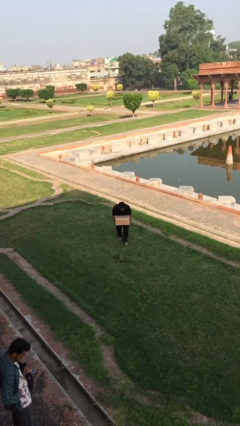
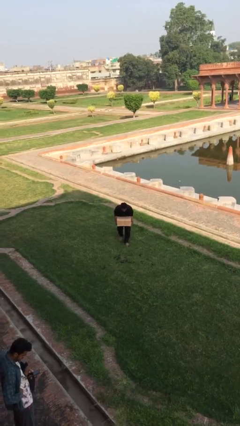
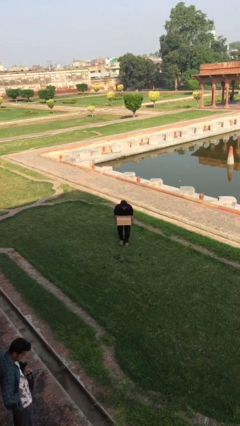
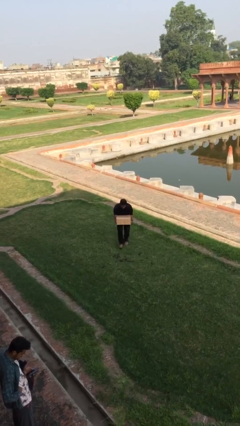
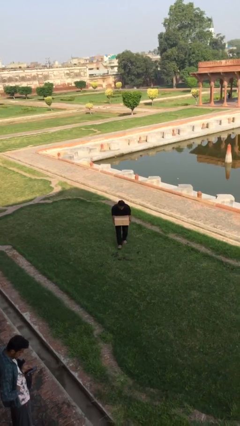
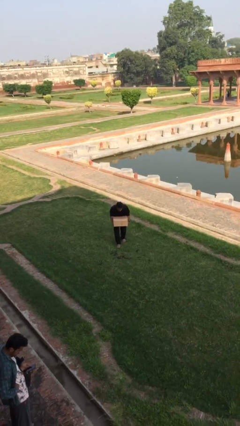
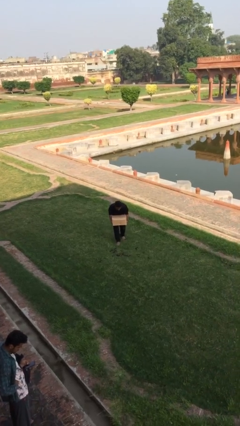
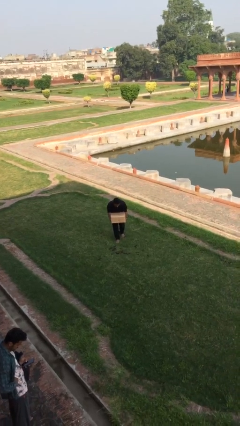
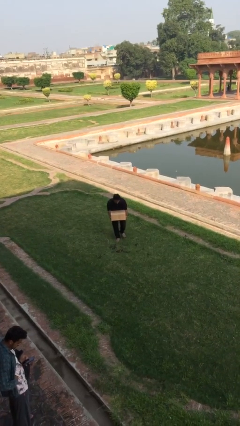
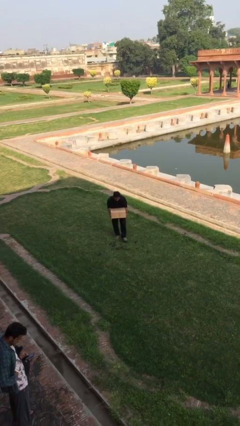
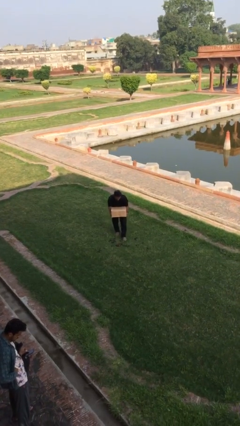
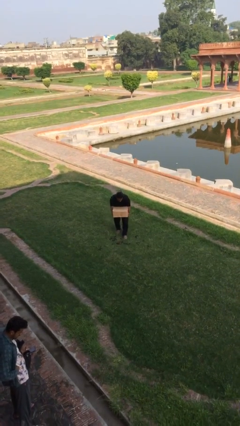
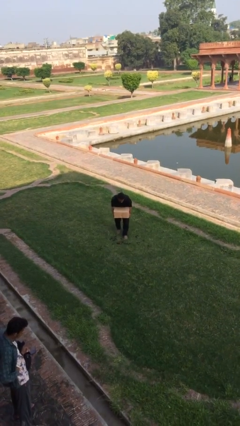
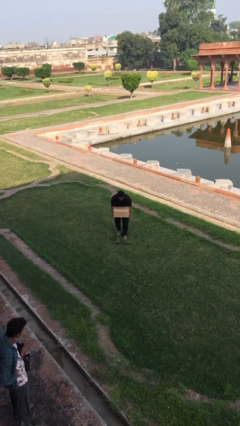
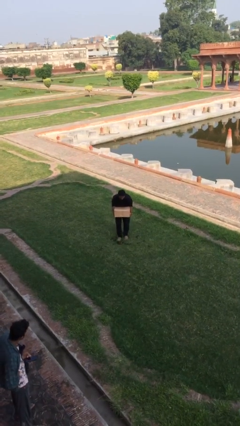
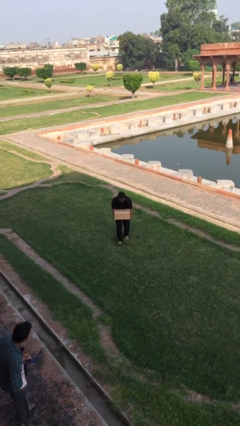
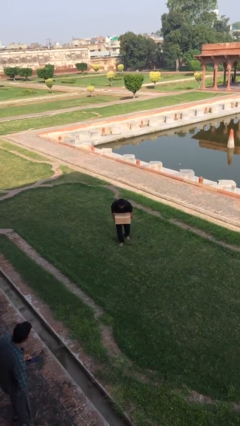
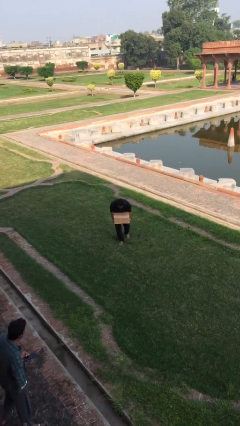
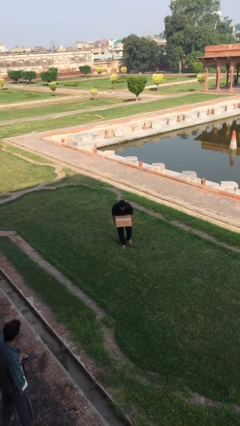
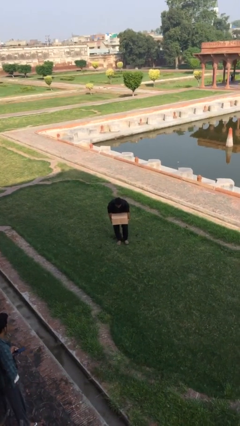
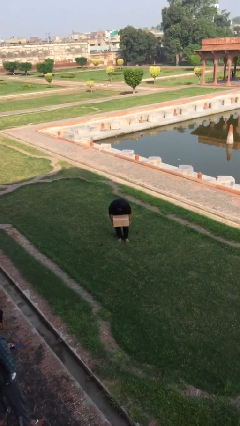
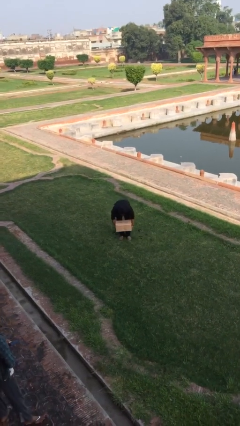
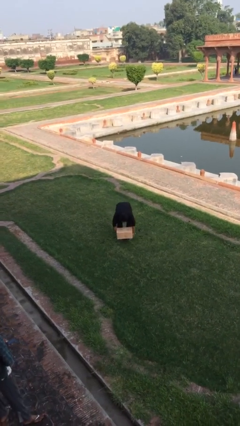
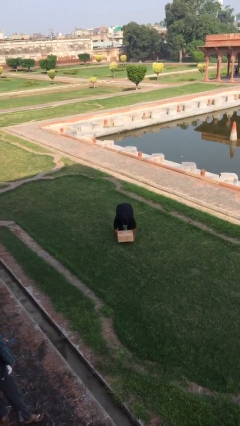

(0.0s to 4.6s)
person carries heavy object

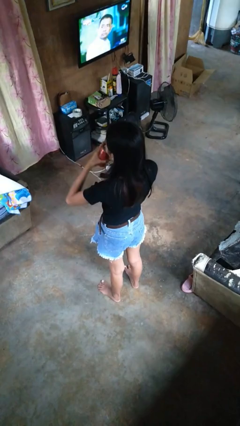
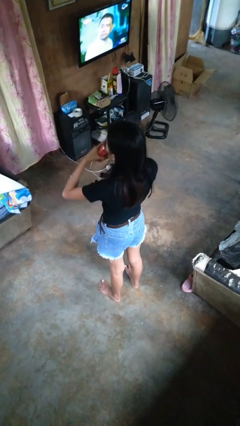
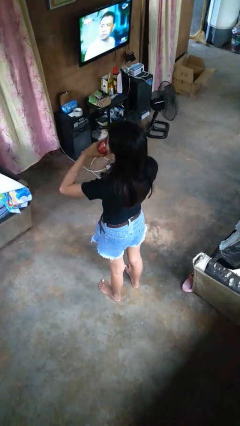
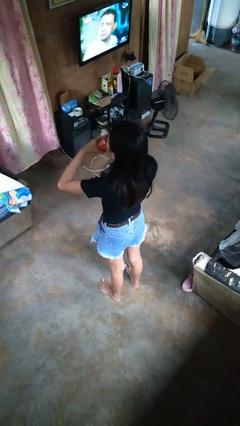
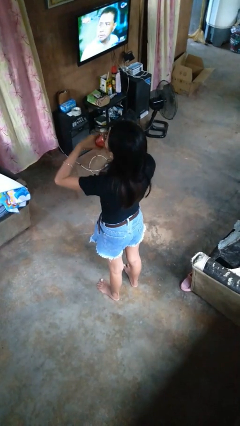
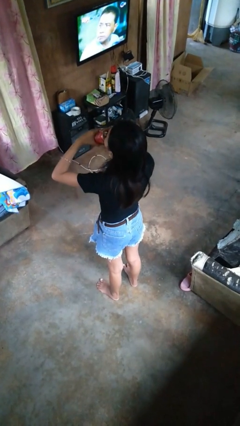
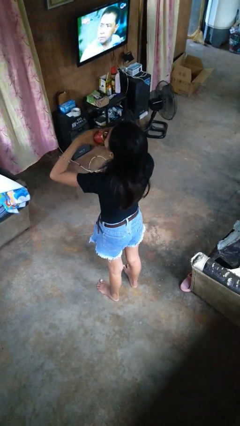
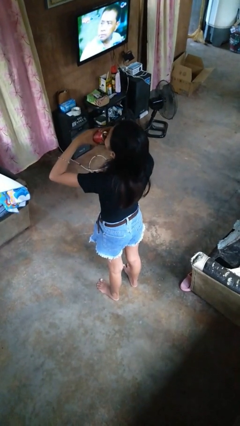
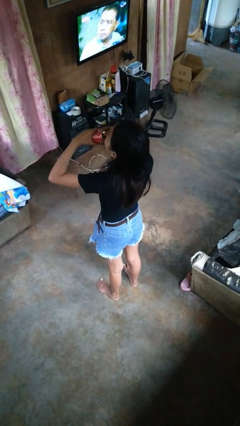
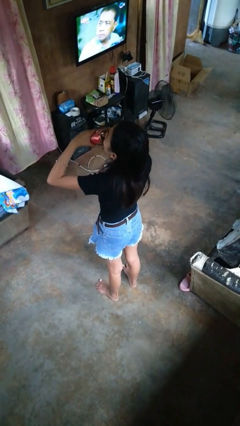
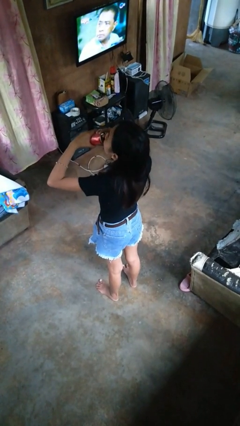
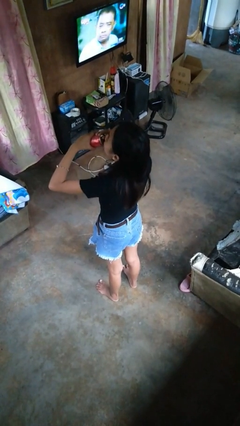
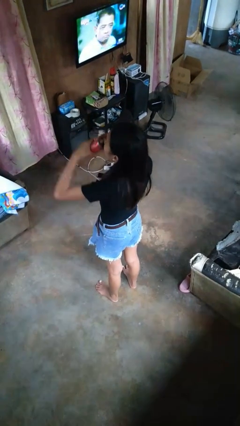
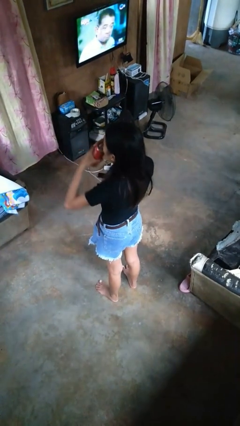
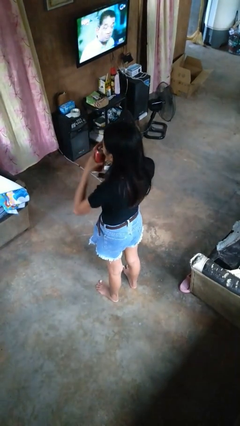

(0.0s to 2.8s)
person drinks from beverage can

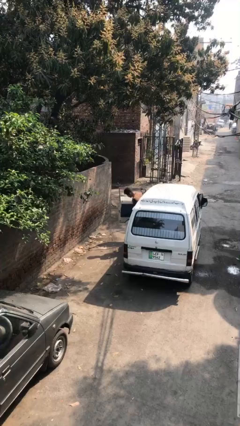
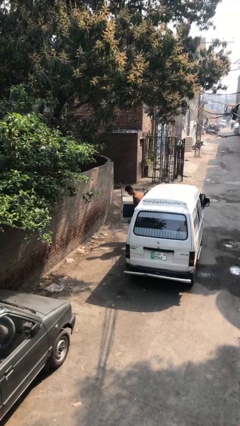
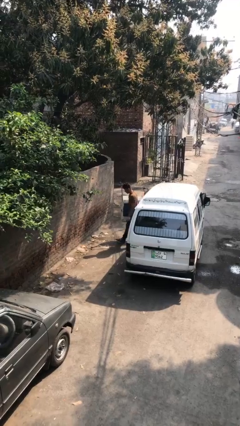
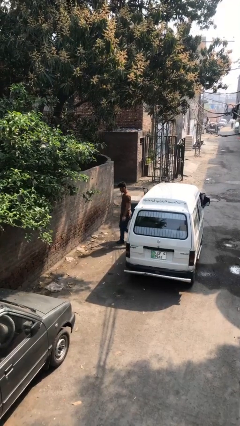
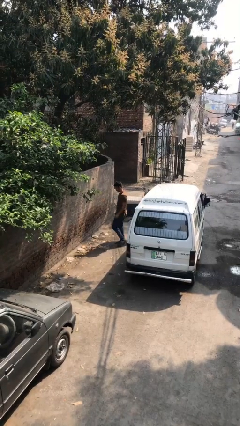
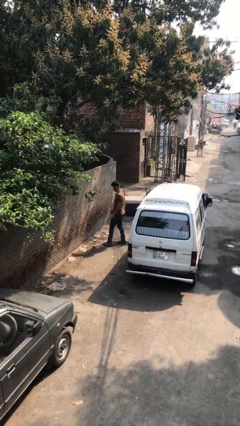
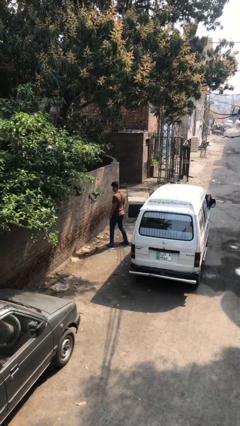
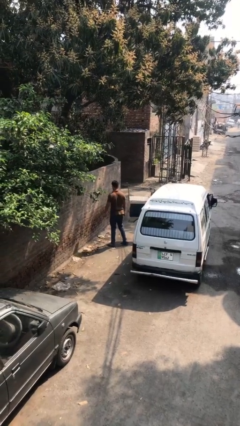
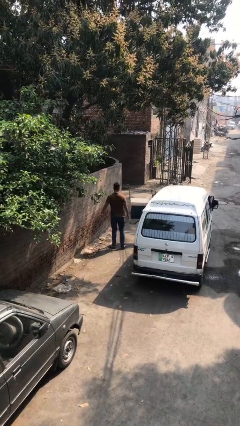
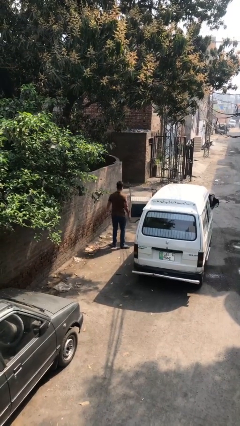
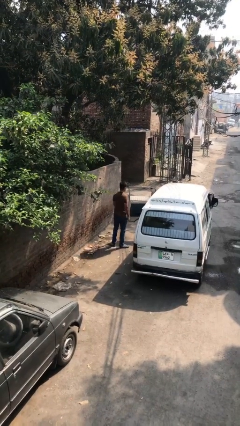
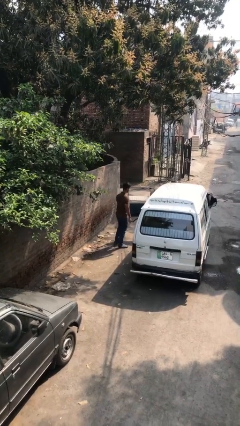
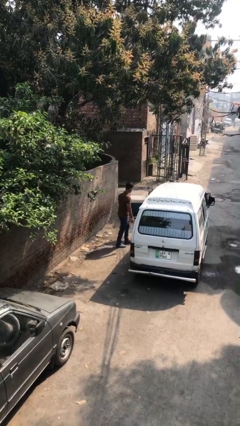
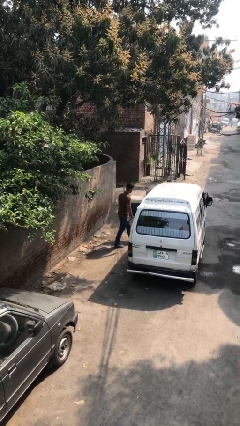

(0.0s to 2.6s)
person exits car

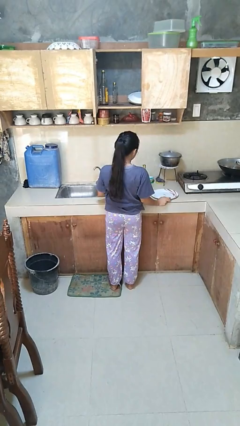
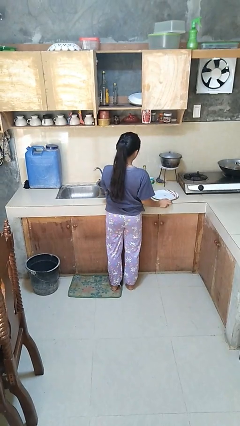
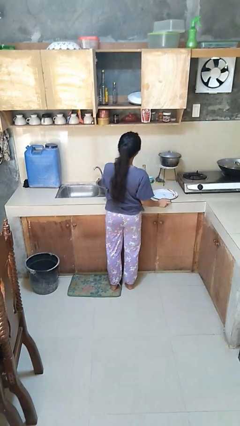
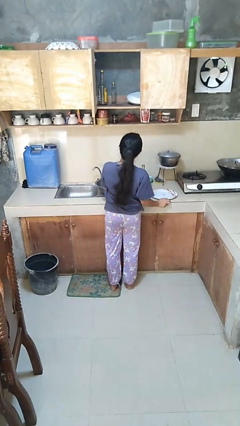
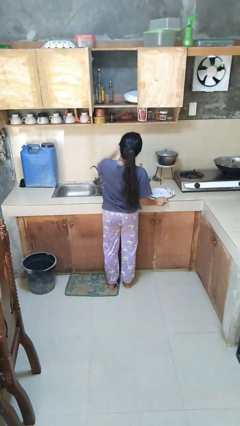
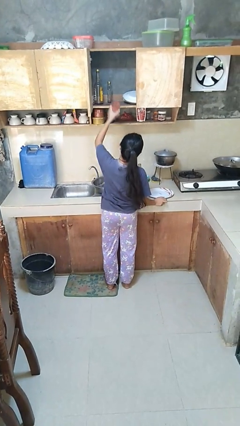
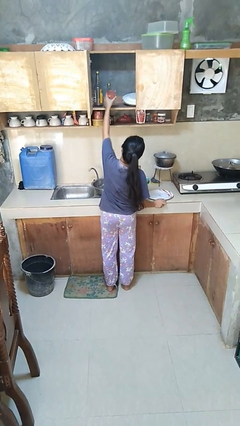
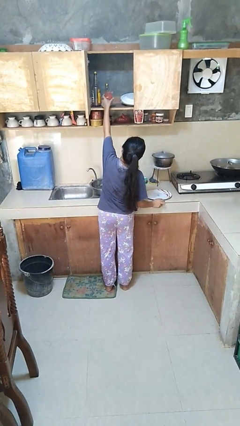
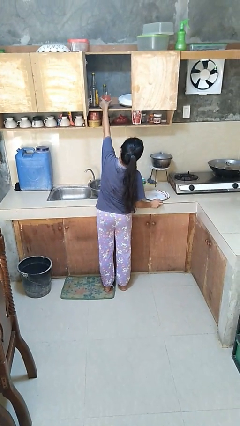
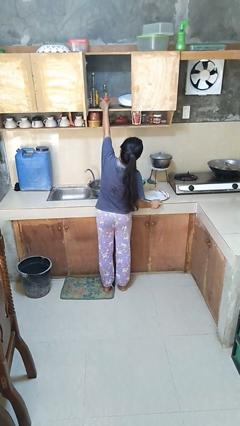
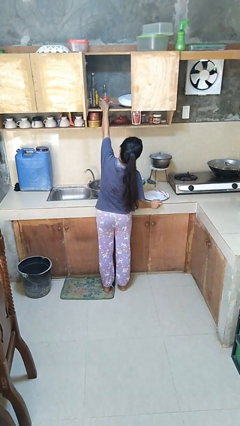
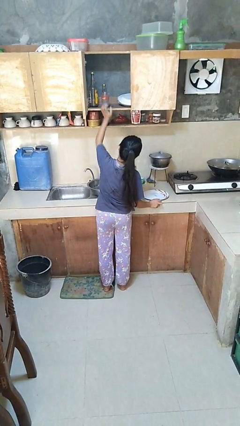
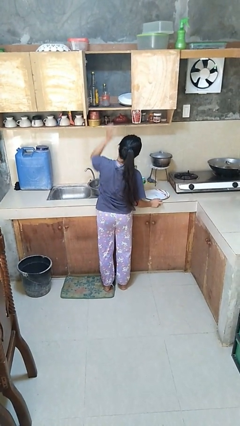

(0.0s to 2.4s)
person puts object in cabinet

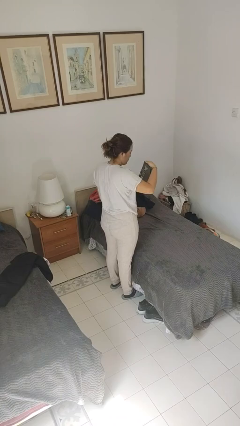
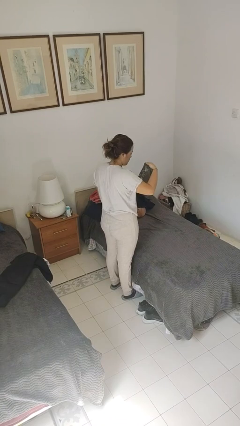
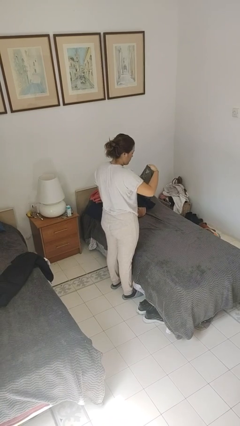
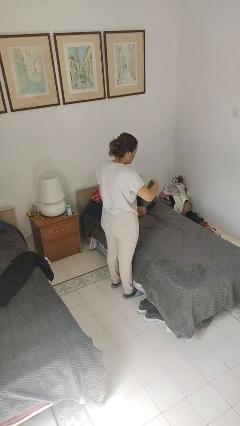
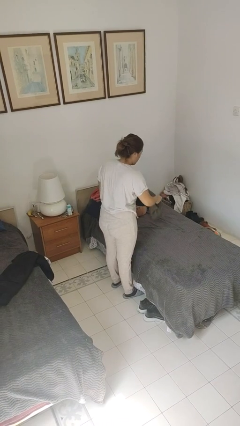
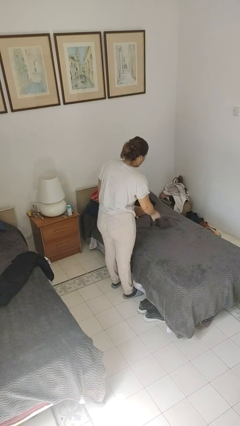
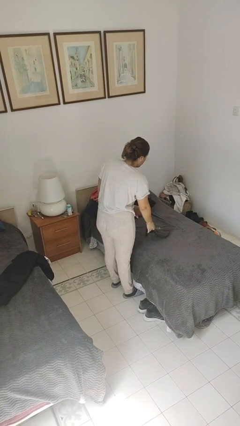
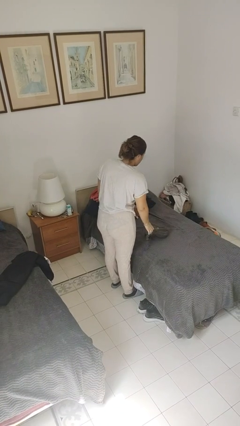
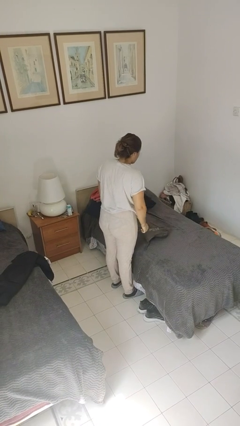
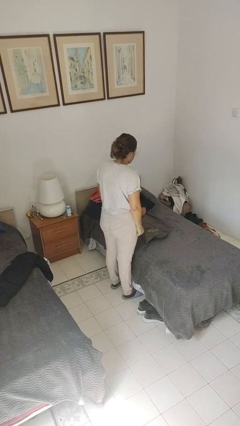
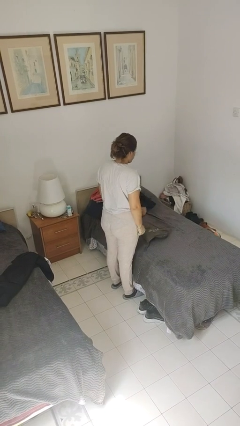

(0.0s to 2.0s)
person puts down object on bed

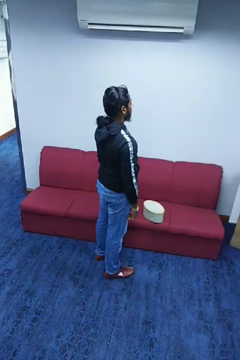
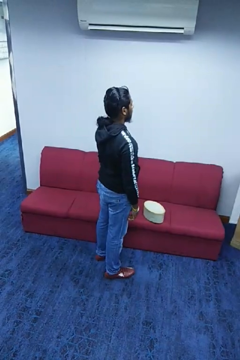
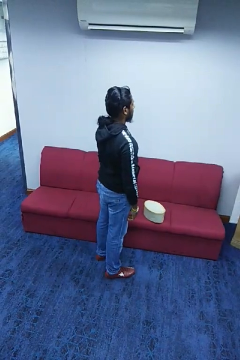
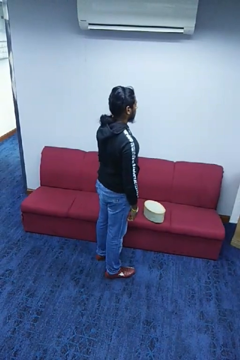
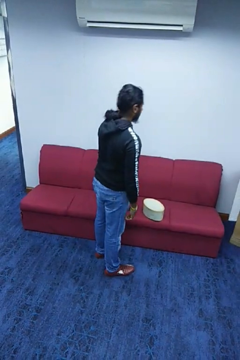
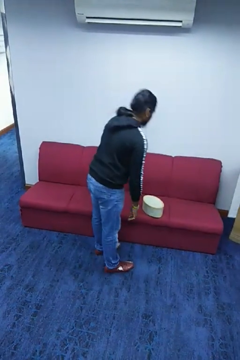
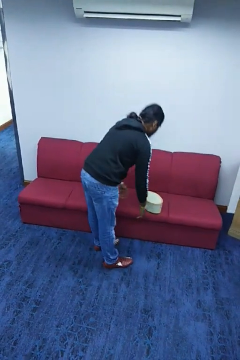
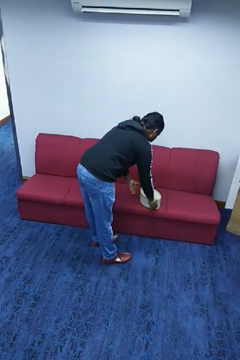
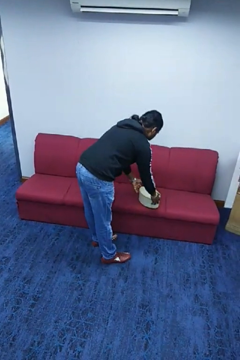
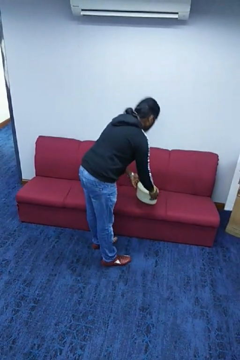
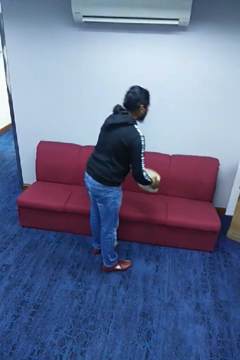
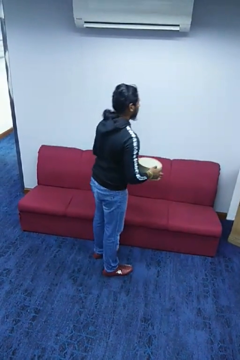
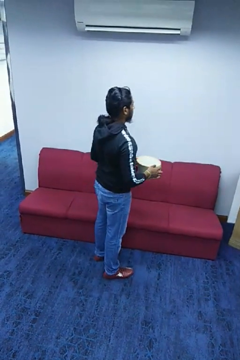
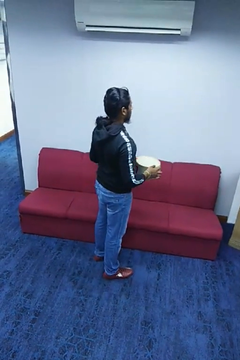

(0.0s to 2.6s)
person picks up object from couch

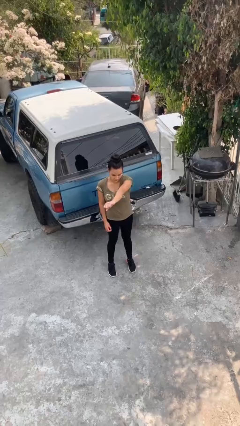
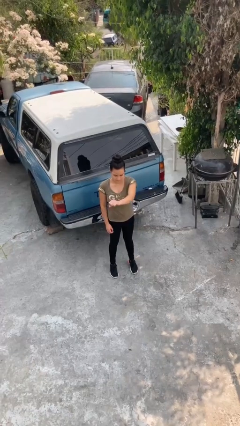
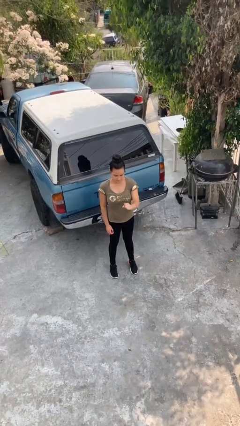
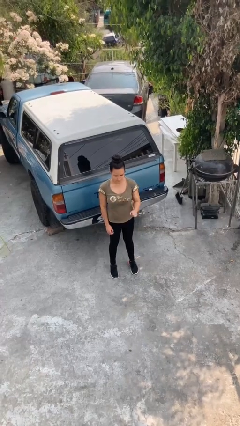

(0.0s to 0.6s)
person karate chop

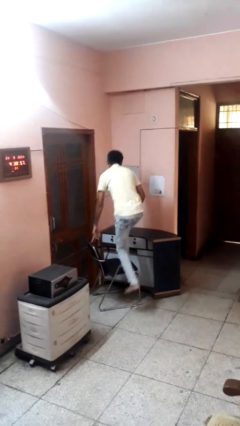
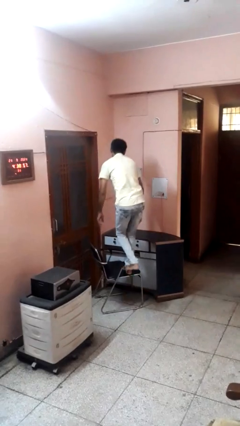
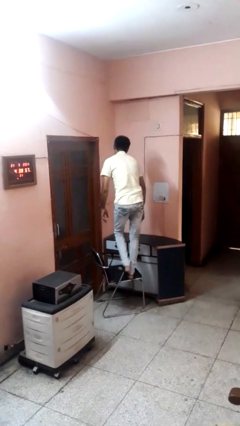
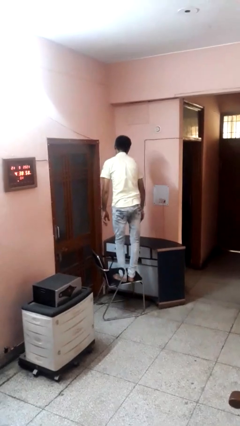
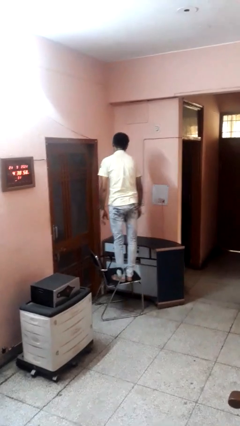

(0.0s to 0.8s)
person climbs on chair
